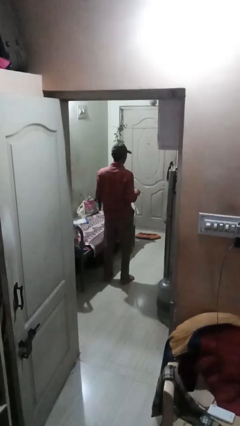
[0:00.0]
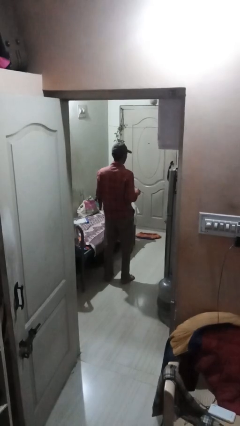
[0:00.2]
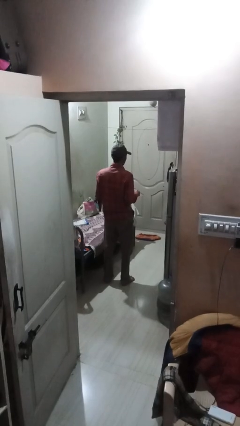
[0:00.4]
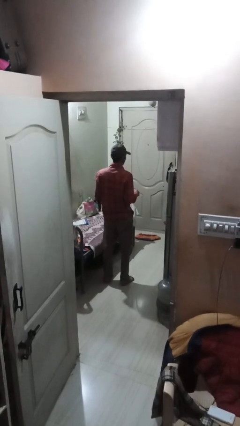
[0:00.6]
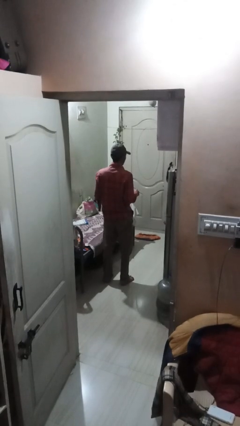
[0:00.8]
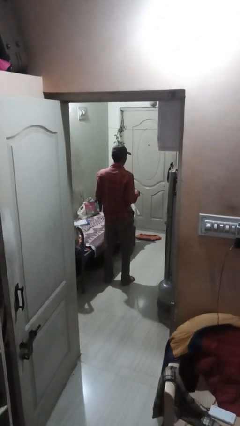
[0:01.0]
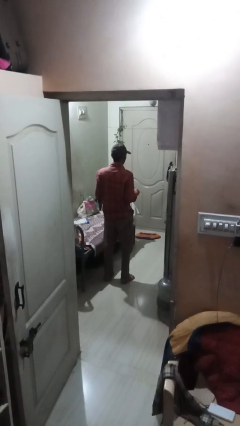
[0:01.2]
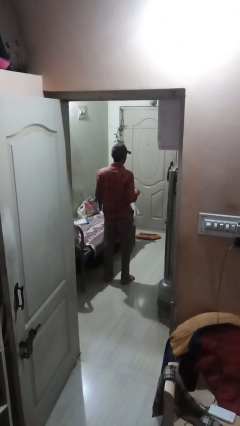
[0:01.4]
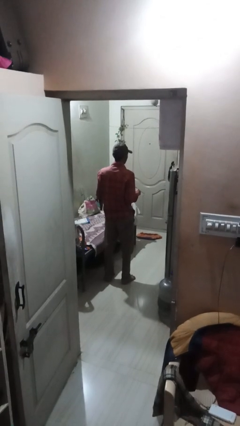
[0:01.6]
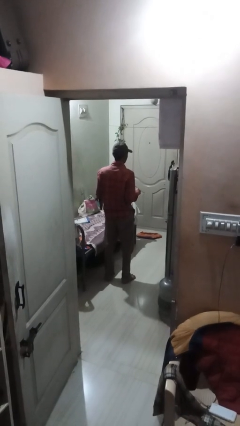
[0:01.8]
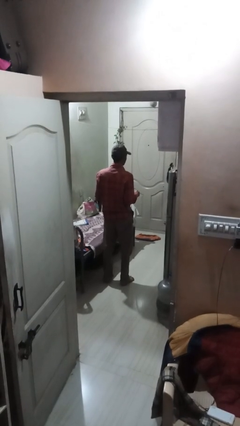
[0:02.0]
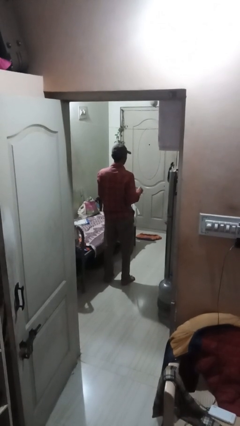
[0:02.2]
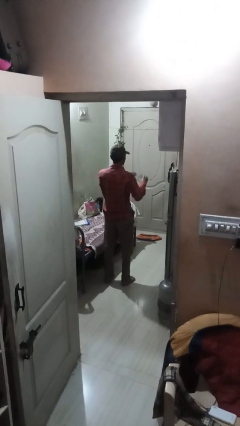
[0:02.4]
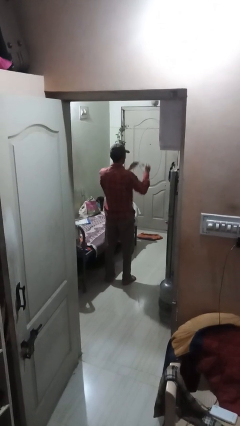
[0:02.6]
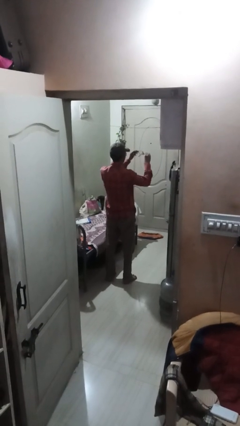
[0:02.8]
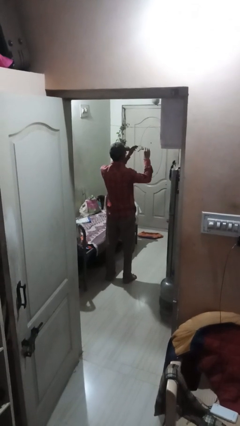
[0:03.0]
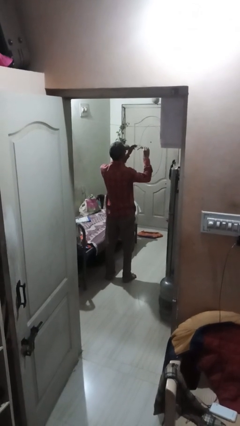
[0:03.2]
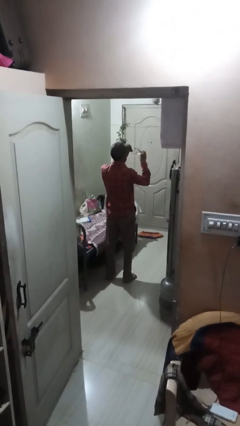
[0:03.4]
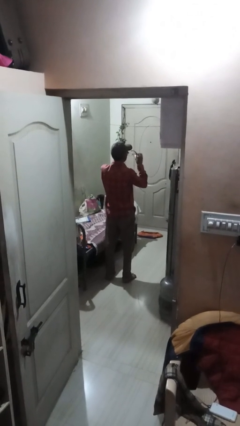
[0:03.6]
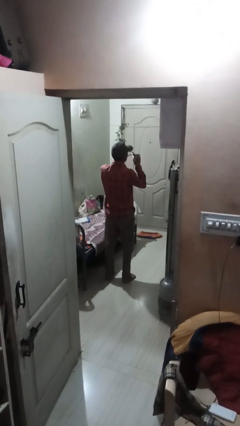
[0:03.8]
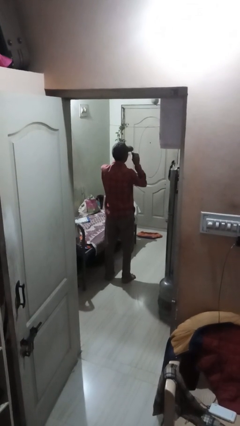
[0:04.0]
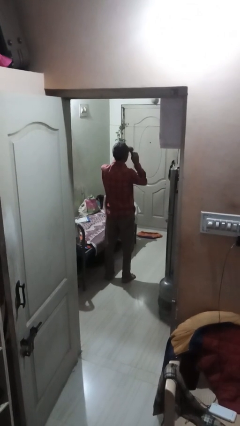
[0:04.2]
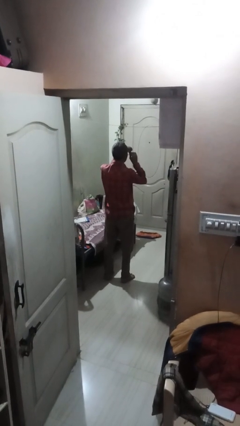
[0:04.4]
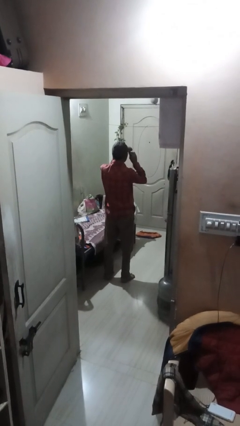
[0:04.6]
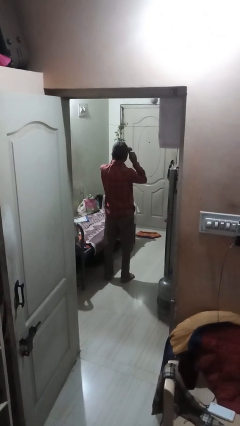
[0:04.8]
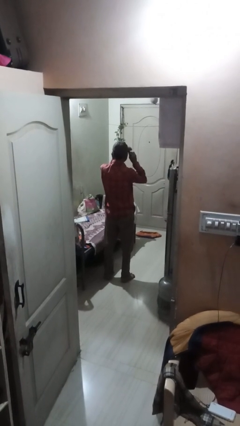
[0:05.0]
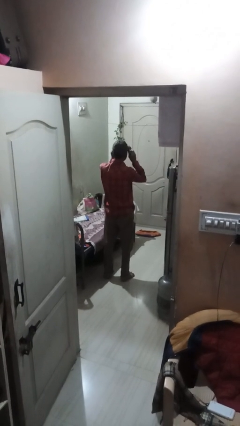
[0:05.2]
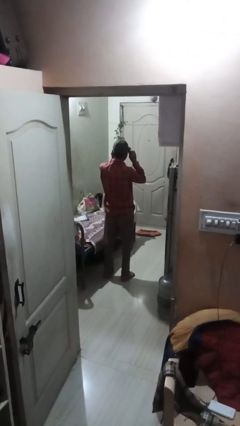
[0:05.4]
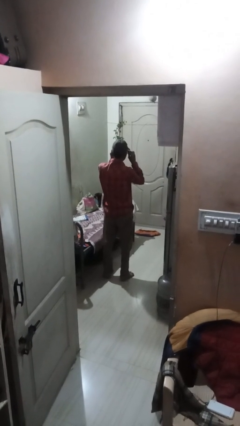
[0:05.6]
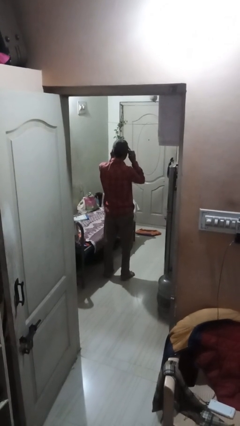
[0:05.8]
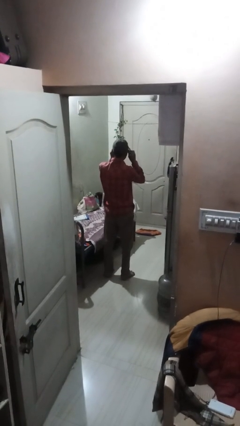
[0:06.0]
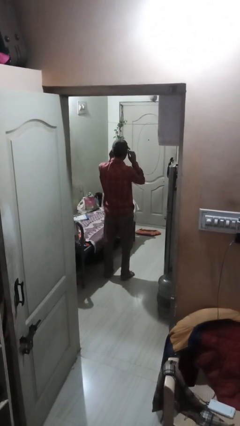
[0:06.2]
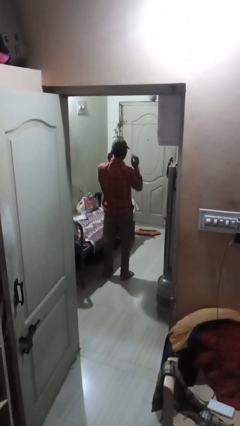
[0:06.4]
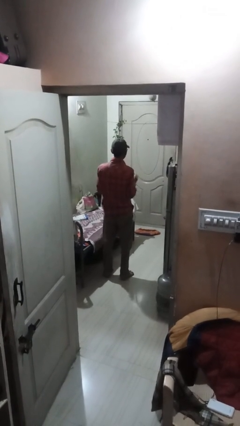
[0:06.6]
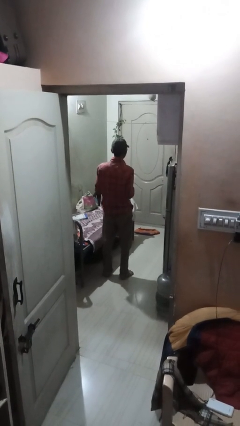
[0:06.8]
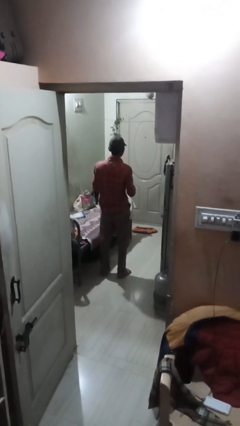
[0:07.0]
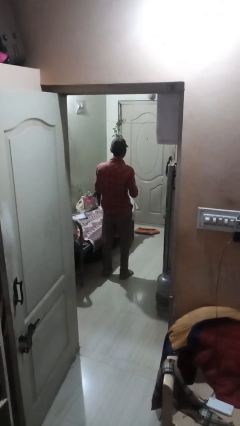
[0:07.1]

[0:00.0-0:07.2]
person puts on glasses

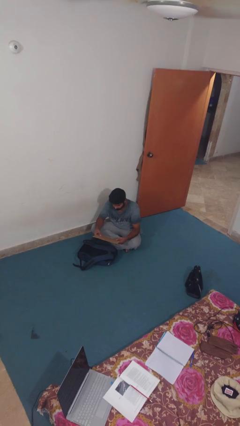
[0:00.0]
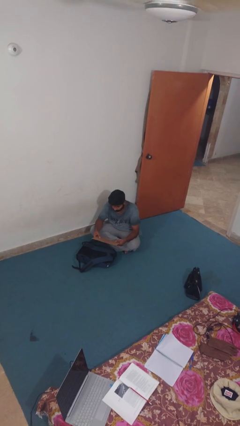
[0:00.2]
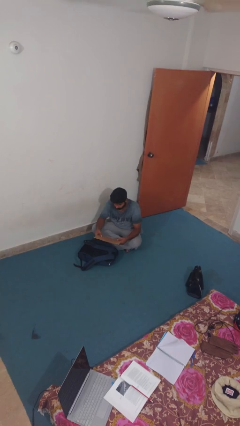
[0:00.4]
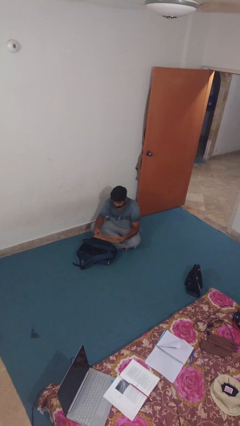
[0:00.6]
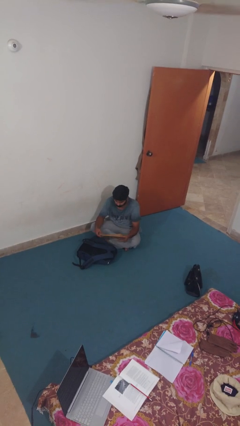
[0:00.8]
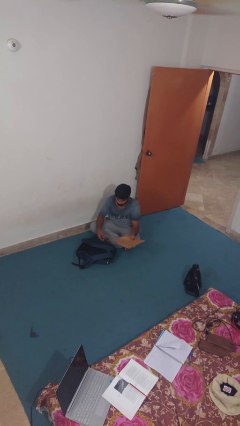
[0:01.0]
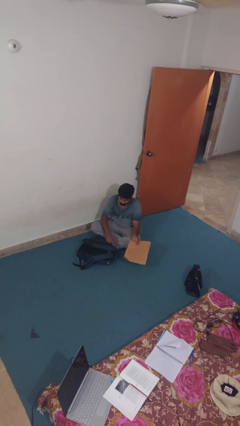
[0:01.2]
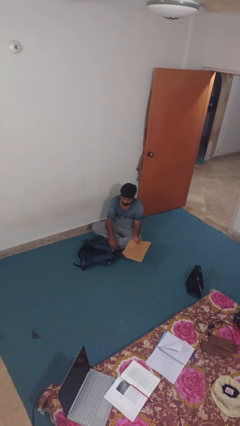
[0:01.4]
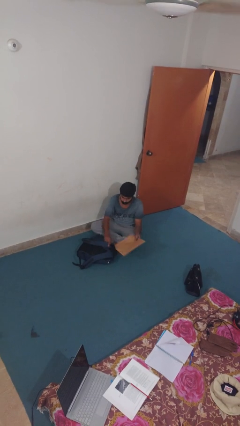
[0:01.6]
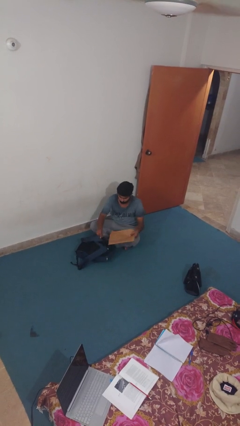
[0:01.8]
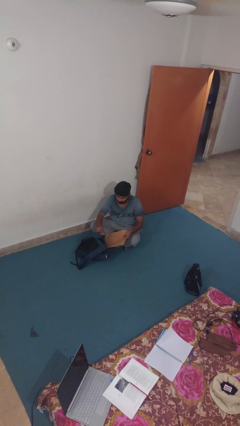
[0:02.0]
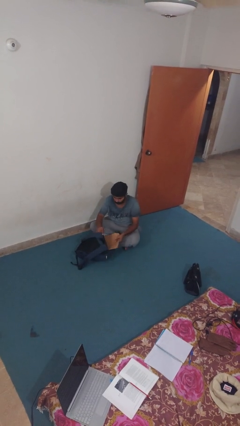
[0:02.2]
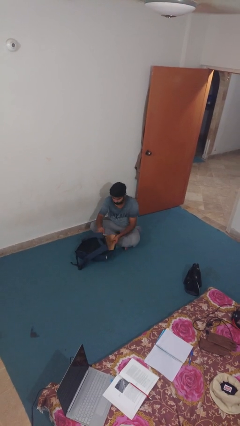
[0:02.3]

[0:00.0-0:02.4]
person puts object into backpack

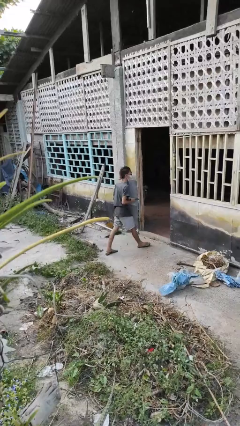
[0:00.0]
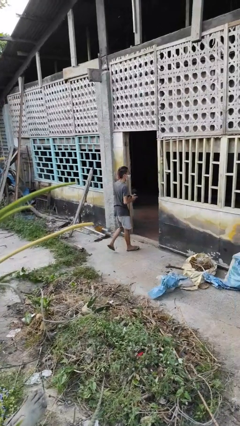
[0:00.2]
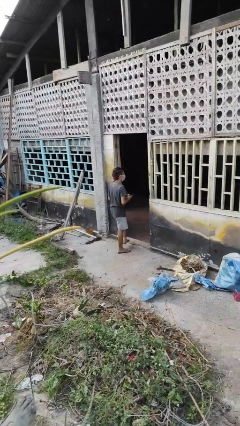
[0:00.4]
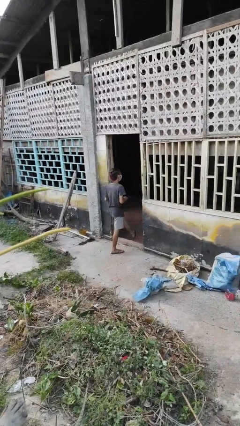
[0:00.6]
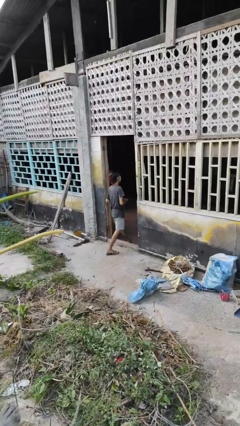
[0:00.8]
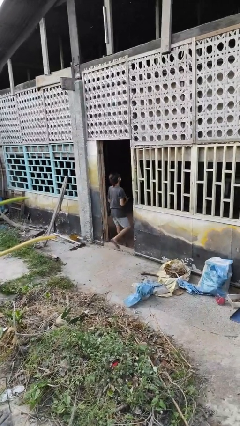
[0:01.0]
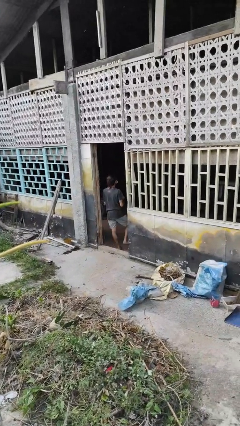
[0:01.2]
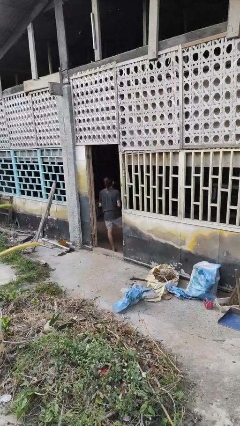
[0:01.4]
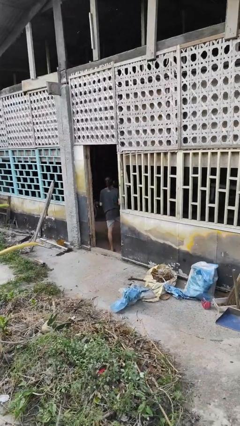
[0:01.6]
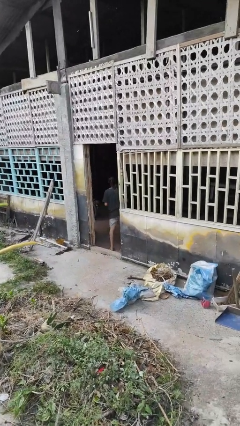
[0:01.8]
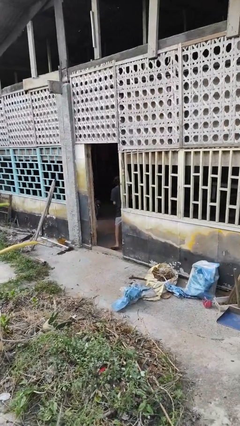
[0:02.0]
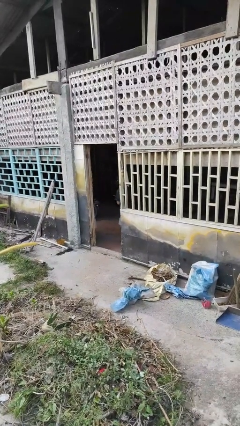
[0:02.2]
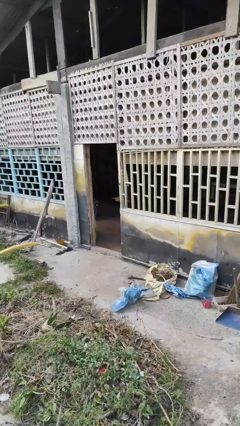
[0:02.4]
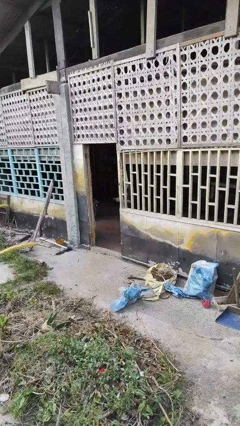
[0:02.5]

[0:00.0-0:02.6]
person exits scene through structure

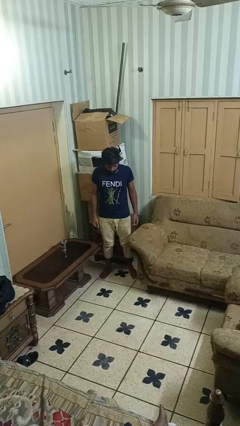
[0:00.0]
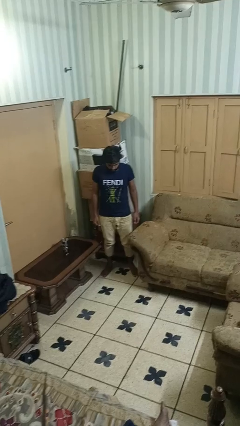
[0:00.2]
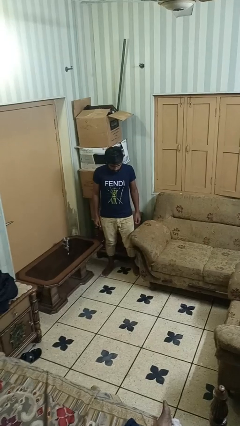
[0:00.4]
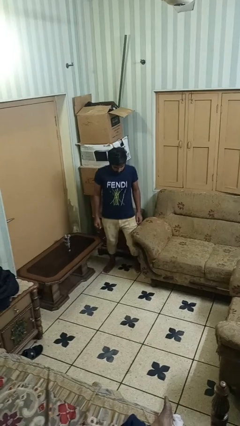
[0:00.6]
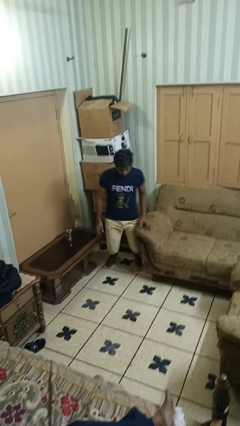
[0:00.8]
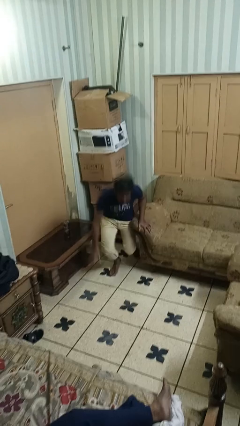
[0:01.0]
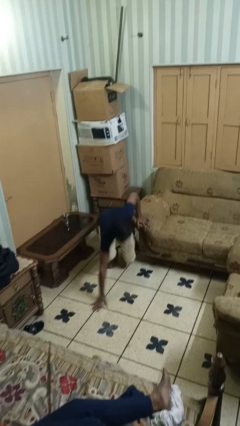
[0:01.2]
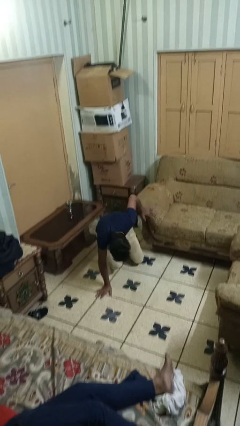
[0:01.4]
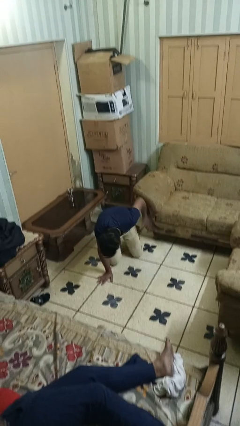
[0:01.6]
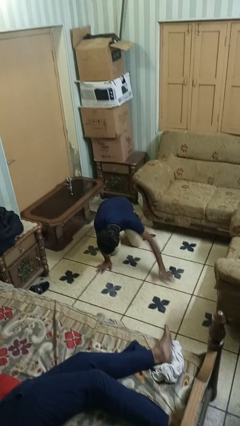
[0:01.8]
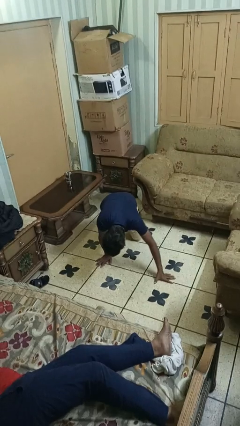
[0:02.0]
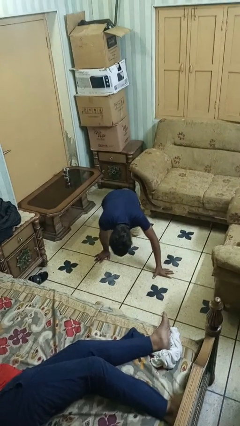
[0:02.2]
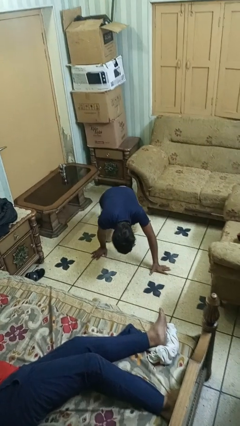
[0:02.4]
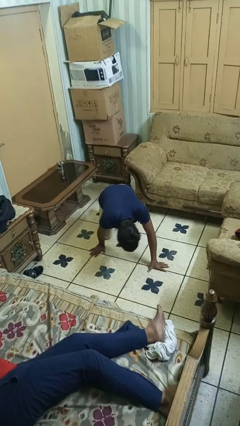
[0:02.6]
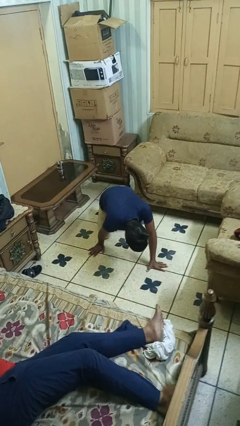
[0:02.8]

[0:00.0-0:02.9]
person trips on object on floor

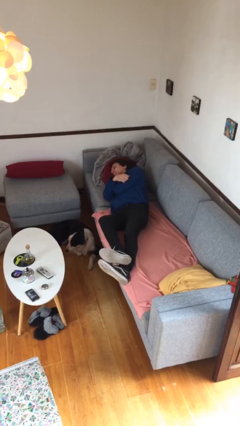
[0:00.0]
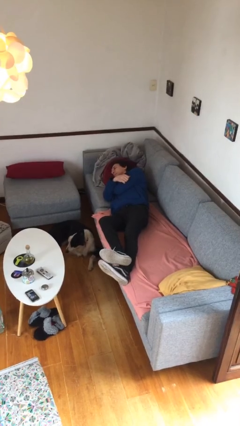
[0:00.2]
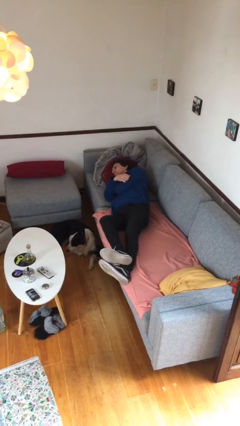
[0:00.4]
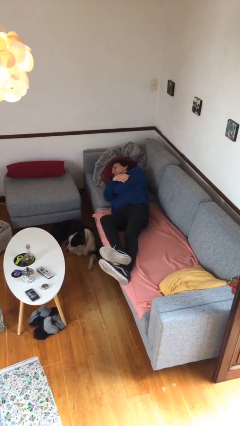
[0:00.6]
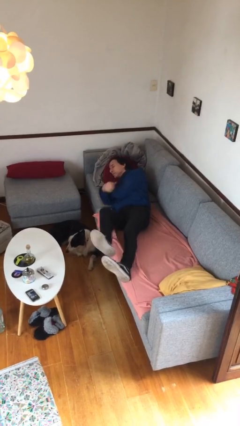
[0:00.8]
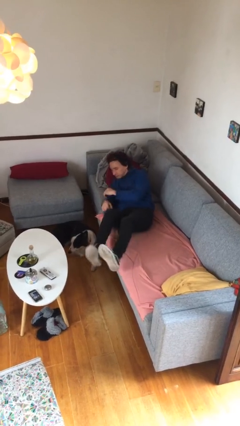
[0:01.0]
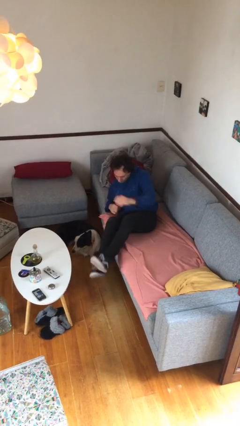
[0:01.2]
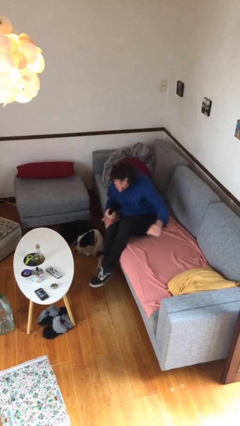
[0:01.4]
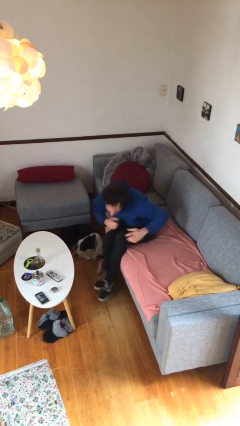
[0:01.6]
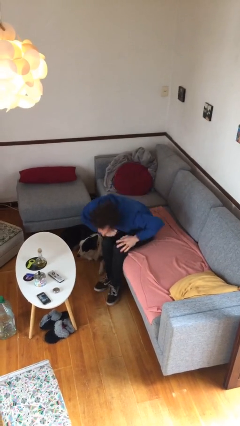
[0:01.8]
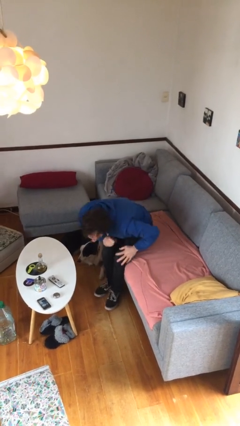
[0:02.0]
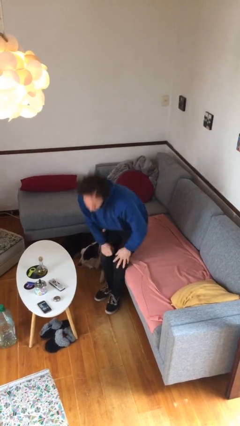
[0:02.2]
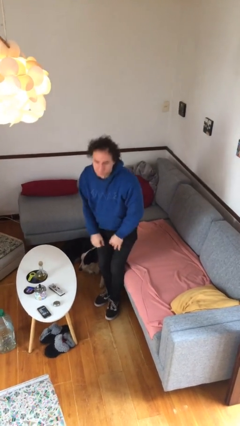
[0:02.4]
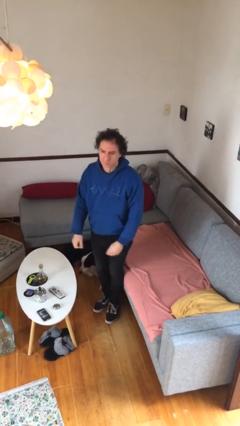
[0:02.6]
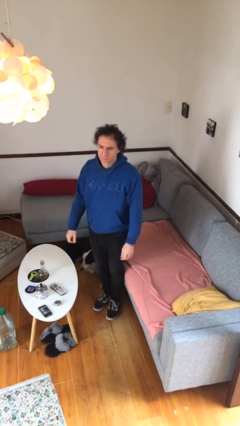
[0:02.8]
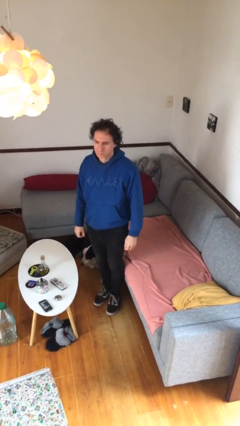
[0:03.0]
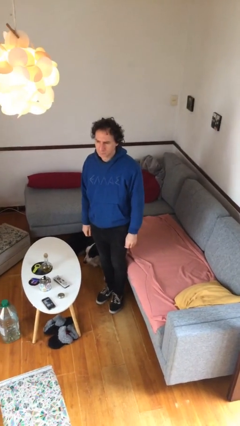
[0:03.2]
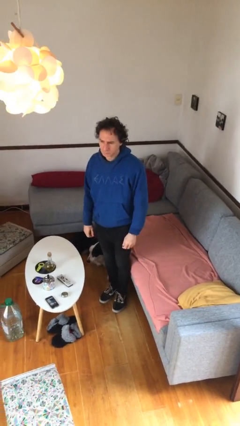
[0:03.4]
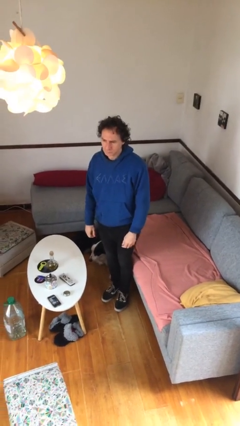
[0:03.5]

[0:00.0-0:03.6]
person stands up
